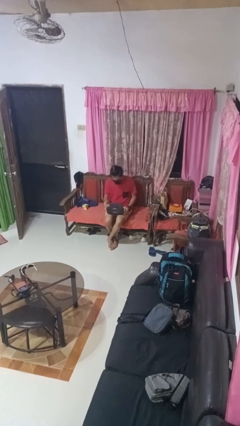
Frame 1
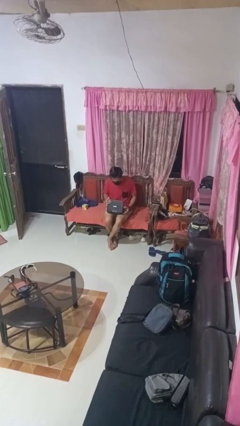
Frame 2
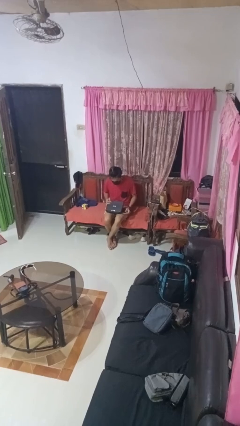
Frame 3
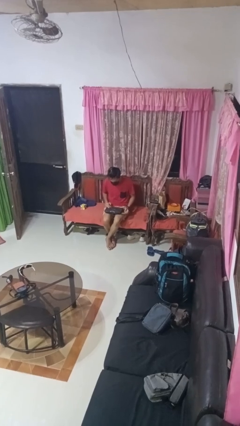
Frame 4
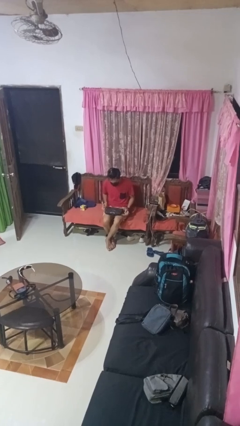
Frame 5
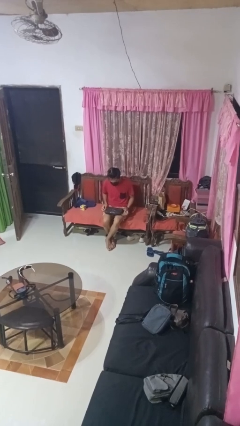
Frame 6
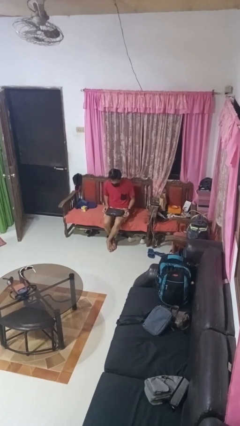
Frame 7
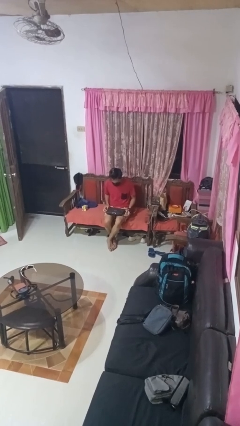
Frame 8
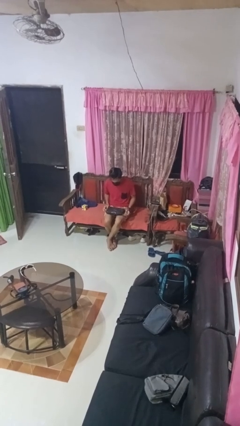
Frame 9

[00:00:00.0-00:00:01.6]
person closes laptop

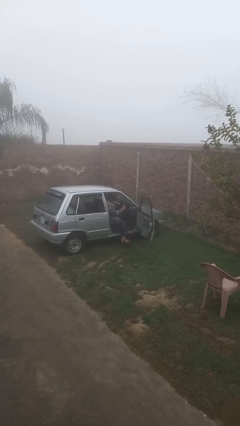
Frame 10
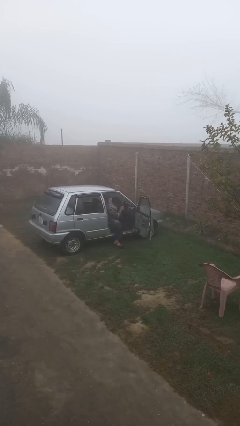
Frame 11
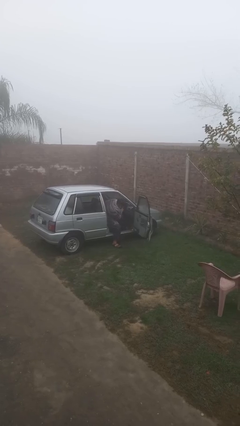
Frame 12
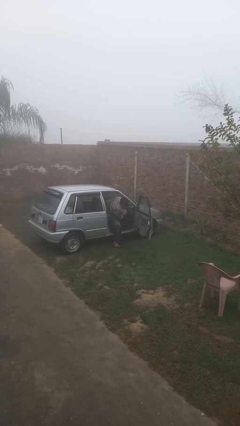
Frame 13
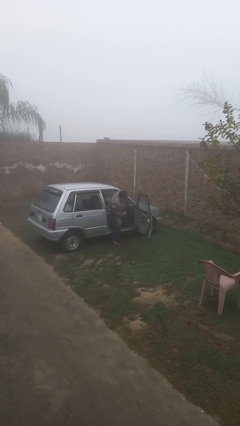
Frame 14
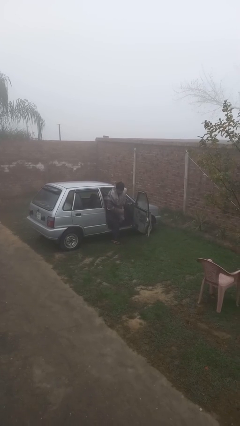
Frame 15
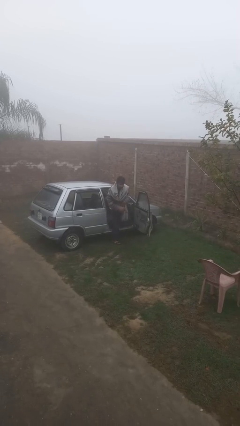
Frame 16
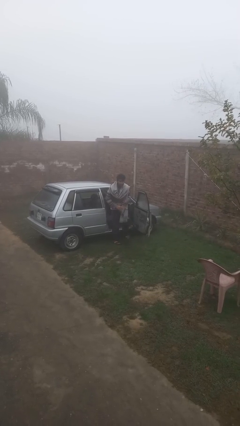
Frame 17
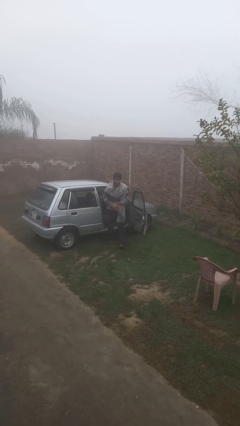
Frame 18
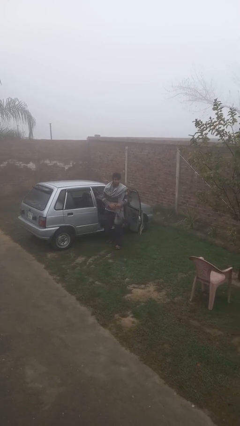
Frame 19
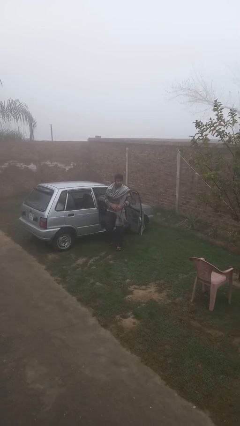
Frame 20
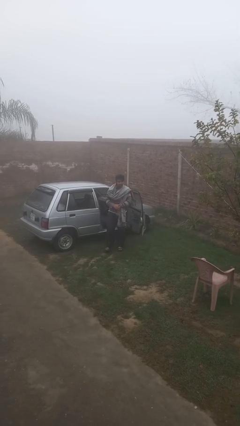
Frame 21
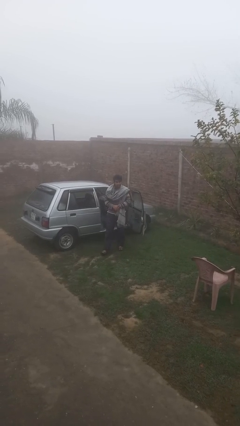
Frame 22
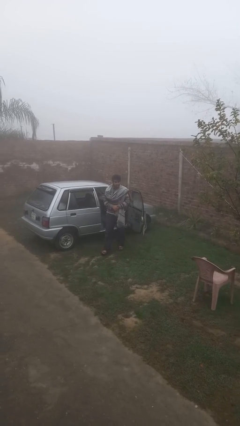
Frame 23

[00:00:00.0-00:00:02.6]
person exits car

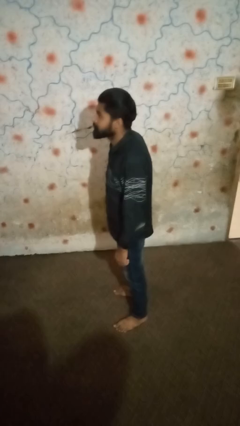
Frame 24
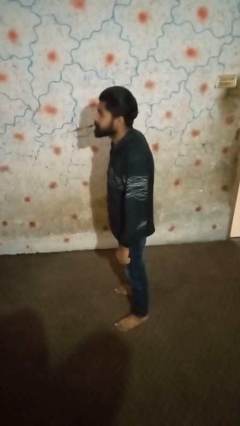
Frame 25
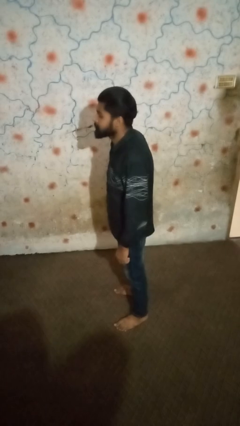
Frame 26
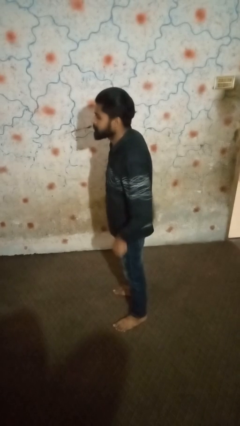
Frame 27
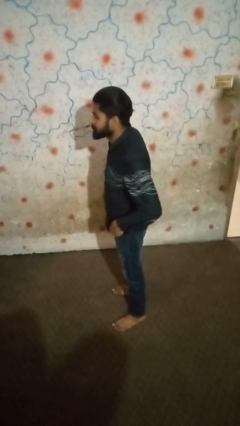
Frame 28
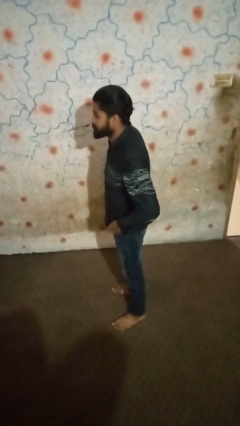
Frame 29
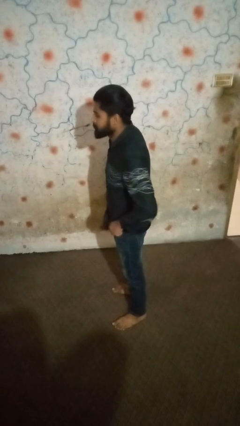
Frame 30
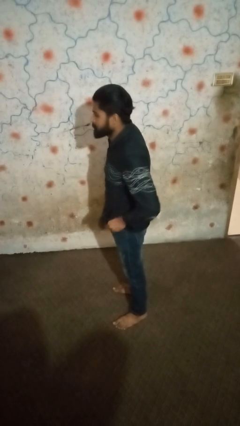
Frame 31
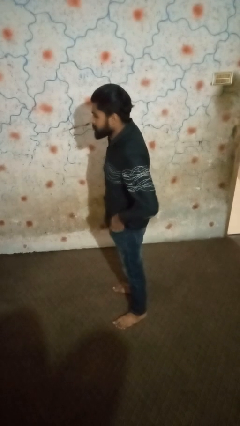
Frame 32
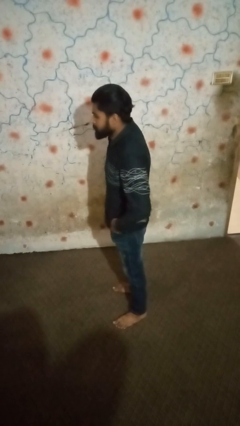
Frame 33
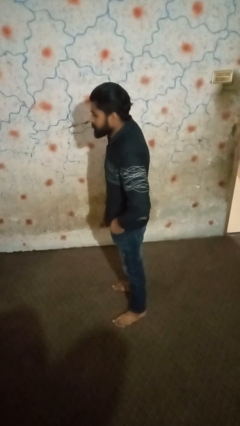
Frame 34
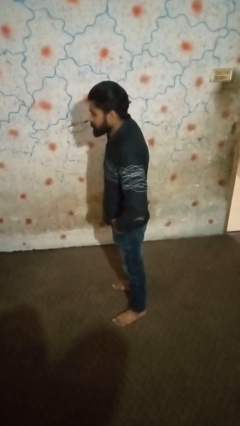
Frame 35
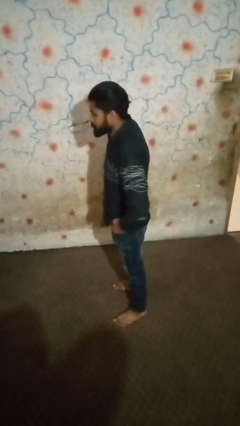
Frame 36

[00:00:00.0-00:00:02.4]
person puts hands in back pockets

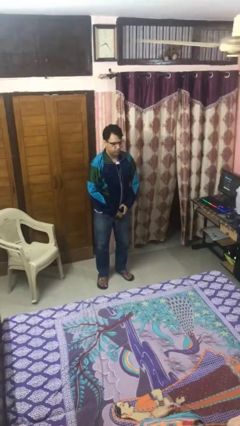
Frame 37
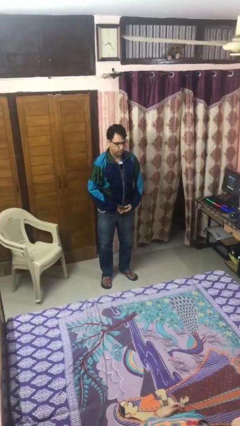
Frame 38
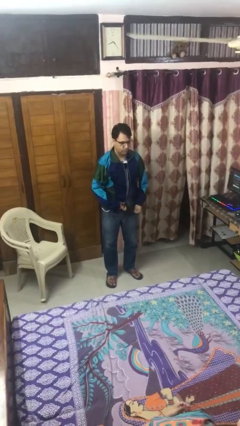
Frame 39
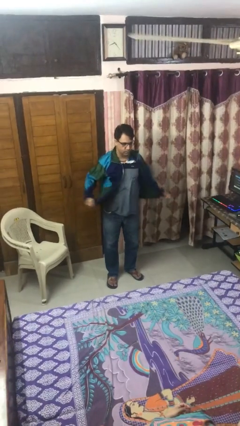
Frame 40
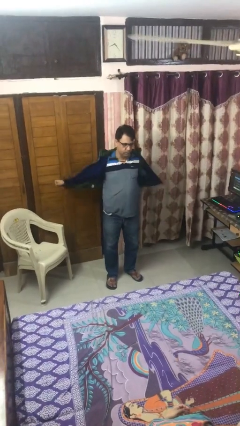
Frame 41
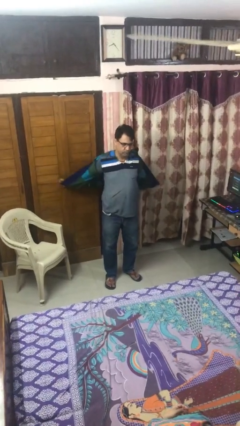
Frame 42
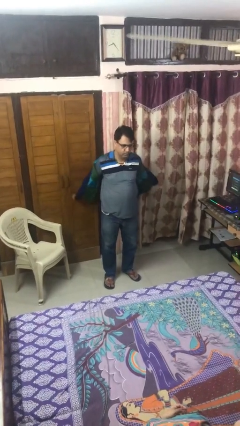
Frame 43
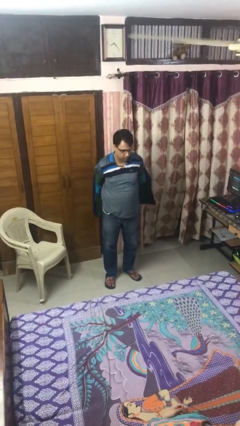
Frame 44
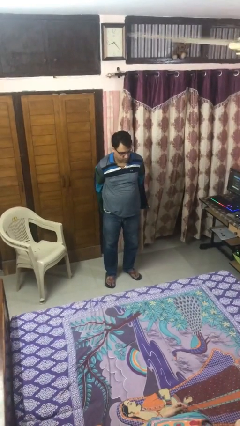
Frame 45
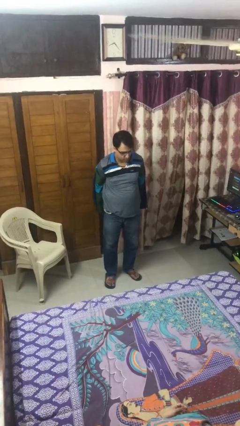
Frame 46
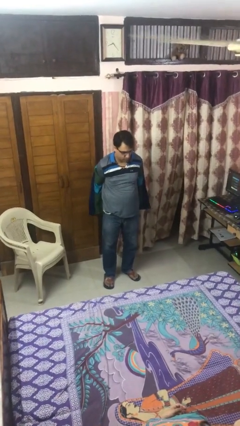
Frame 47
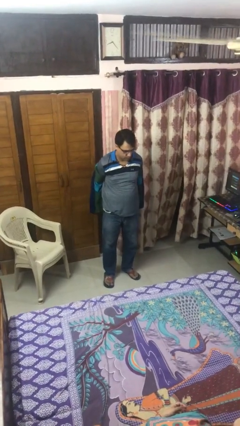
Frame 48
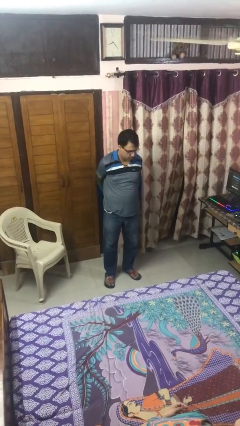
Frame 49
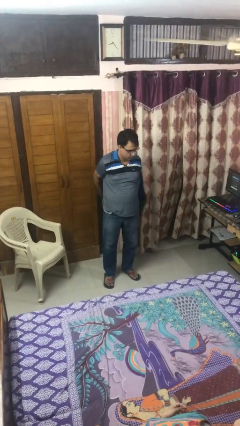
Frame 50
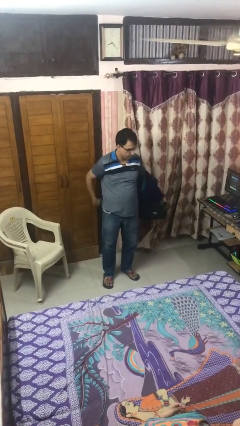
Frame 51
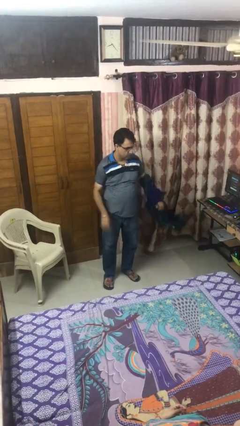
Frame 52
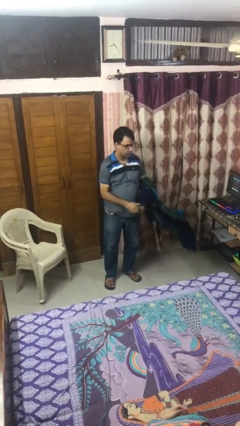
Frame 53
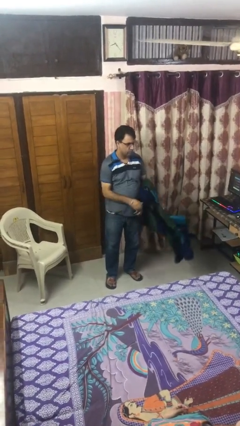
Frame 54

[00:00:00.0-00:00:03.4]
person takes off jacket

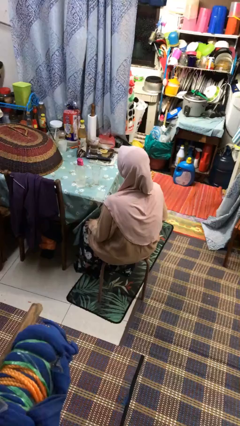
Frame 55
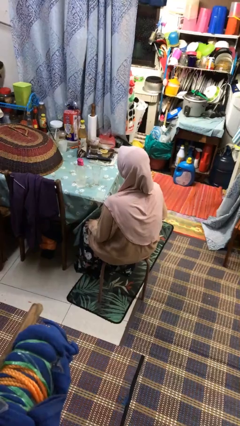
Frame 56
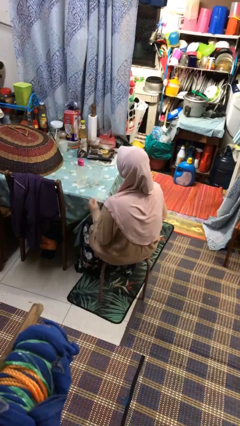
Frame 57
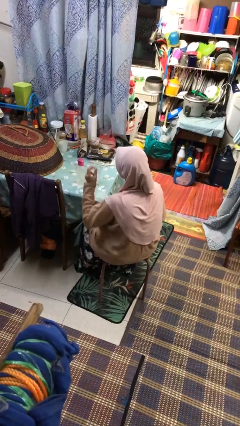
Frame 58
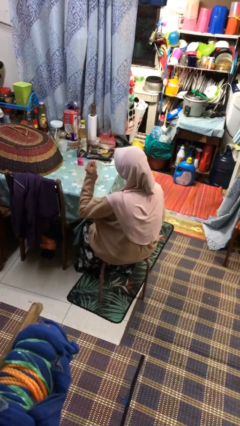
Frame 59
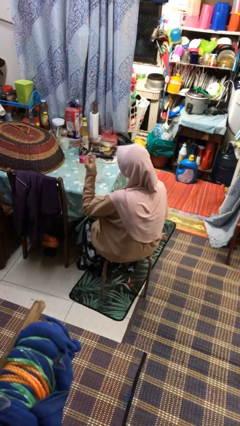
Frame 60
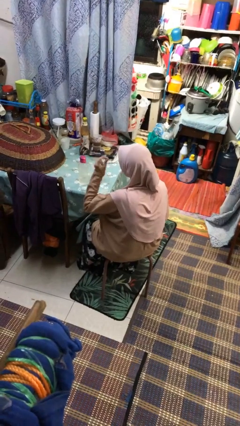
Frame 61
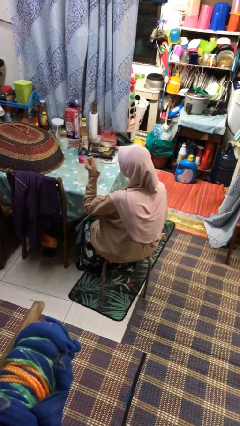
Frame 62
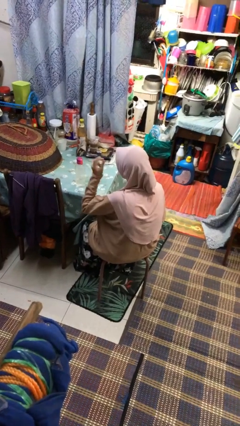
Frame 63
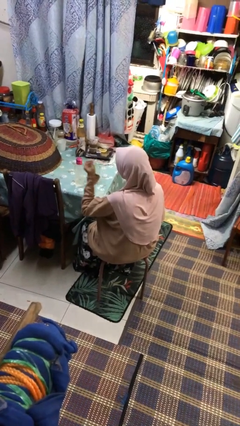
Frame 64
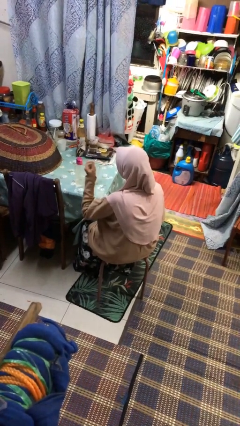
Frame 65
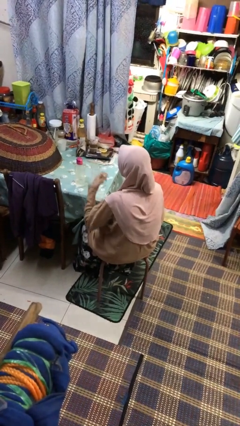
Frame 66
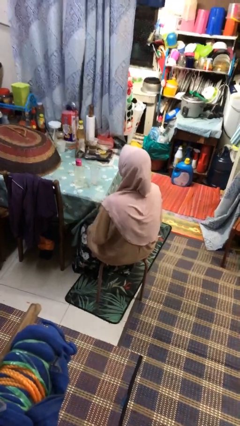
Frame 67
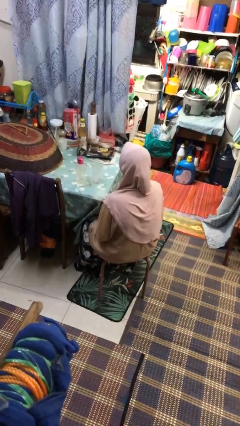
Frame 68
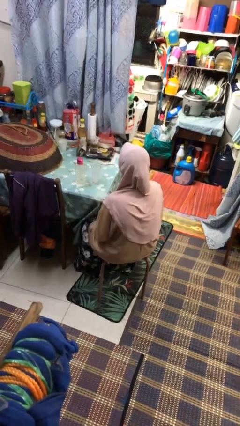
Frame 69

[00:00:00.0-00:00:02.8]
person snaps fingers

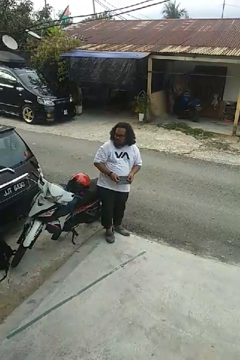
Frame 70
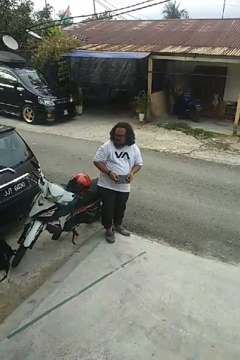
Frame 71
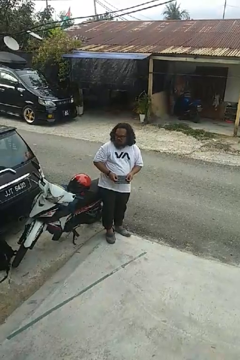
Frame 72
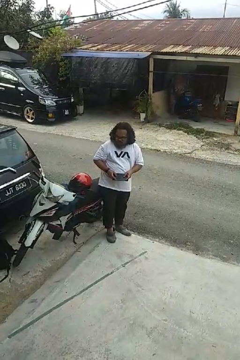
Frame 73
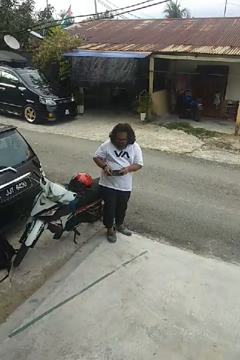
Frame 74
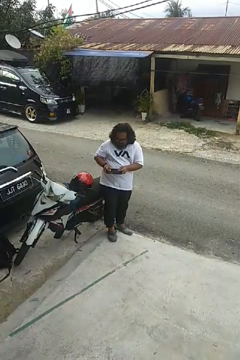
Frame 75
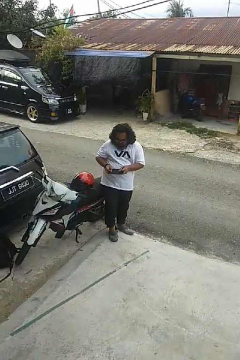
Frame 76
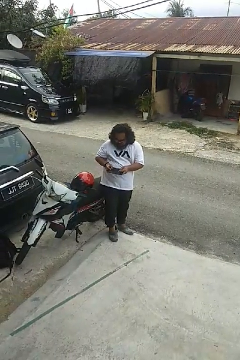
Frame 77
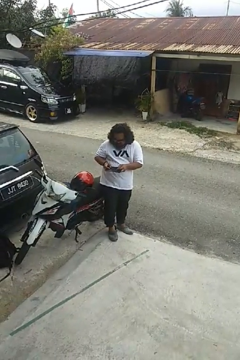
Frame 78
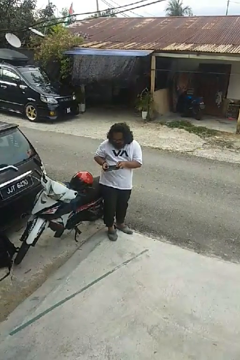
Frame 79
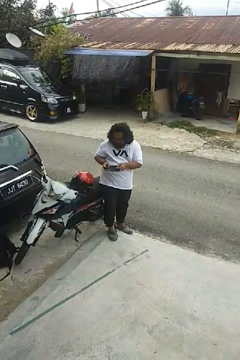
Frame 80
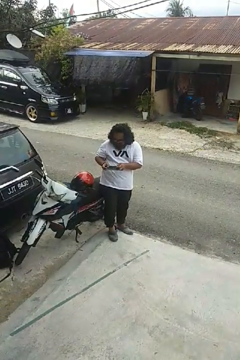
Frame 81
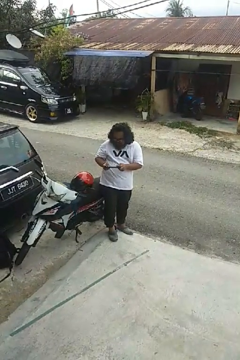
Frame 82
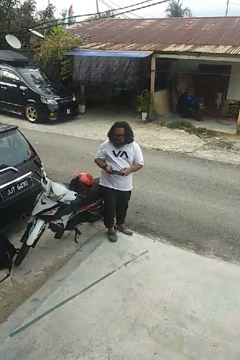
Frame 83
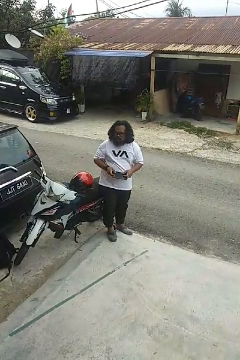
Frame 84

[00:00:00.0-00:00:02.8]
person interacts with handheld game

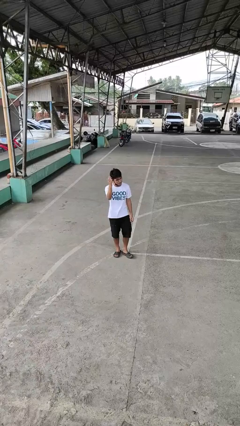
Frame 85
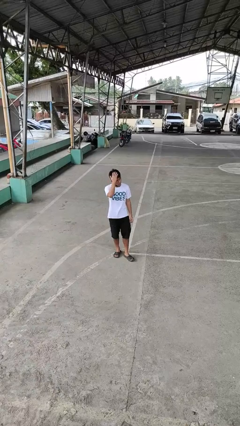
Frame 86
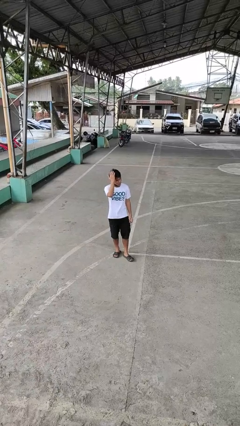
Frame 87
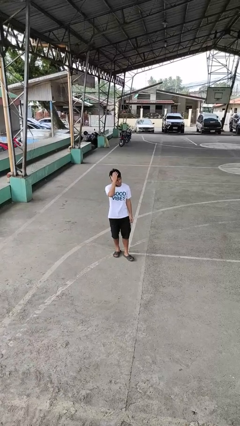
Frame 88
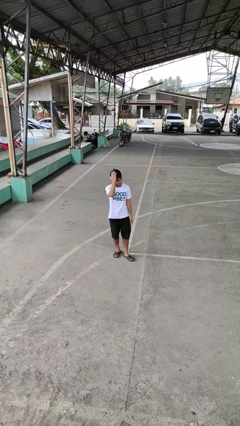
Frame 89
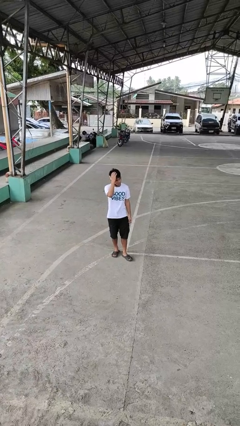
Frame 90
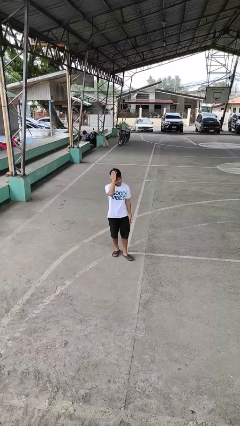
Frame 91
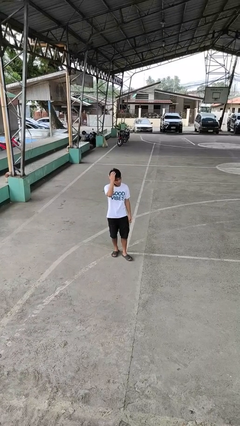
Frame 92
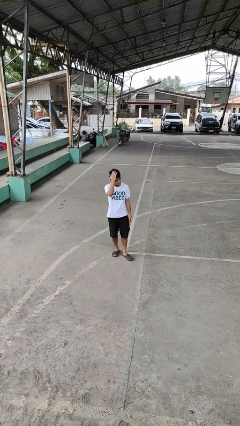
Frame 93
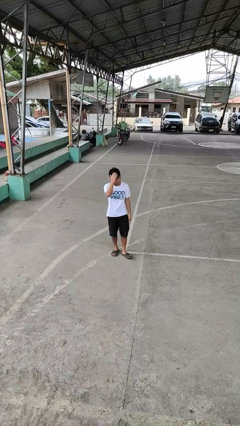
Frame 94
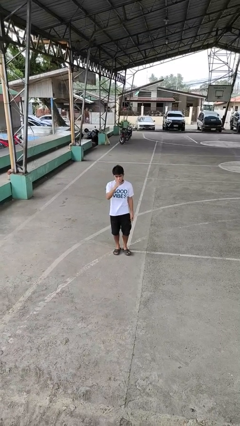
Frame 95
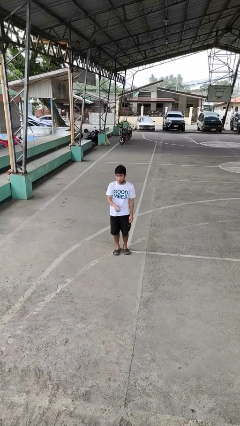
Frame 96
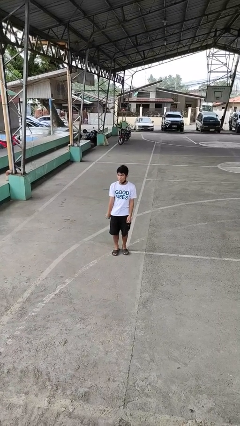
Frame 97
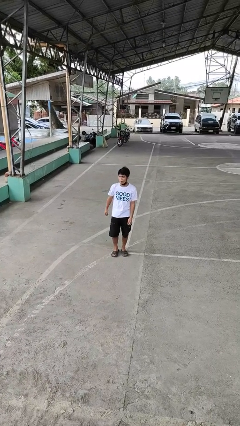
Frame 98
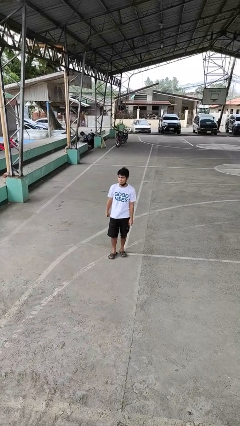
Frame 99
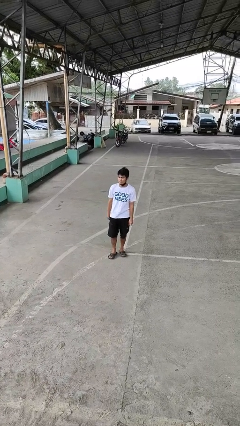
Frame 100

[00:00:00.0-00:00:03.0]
person pats head
